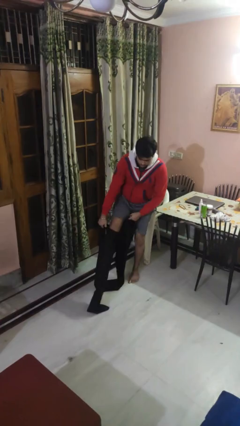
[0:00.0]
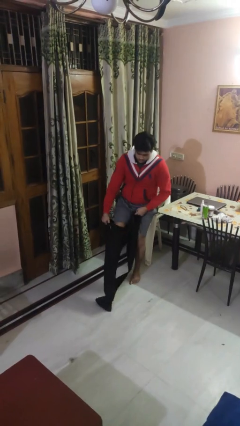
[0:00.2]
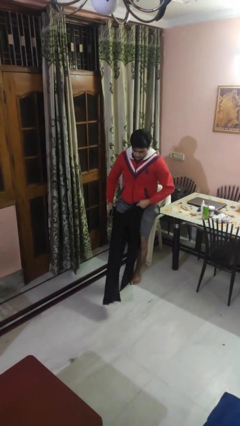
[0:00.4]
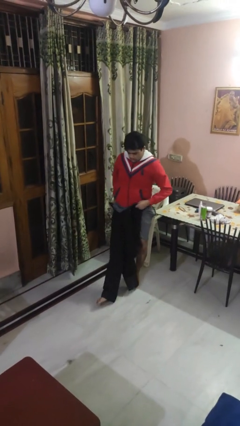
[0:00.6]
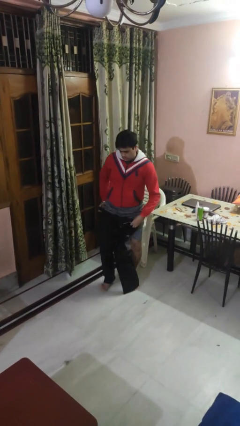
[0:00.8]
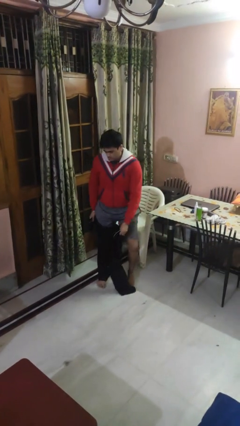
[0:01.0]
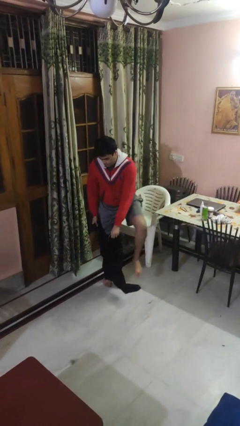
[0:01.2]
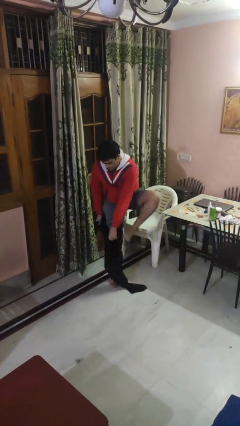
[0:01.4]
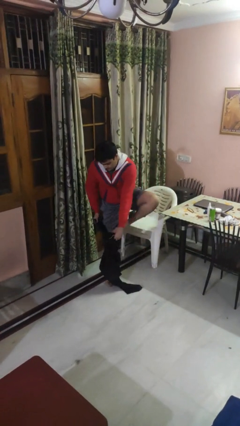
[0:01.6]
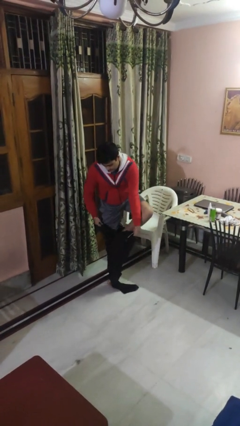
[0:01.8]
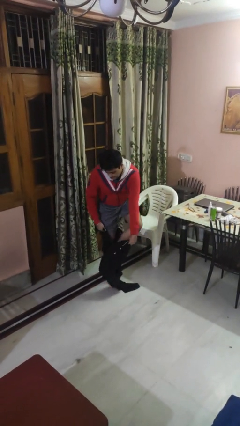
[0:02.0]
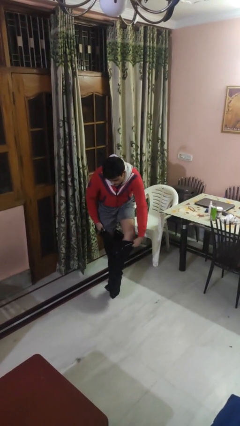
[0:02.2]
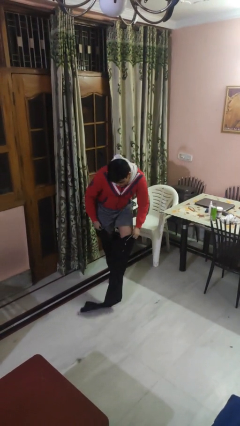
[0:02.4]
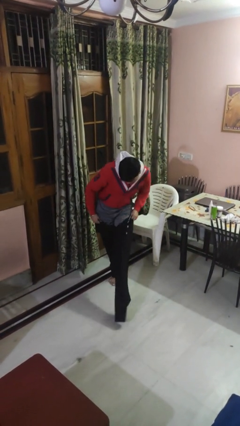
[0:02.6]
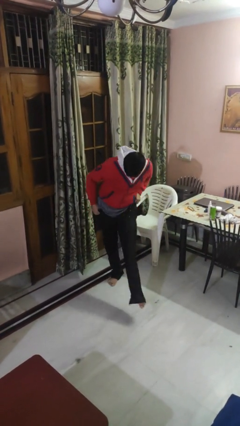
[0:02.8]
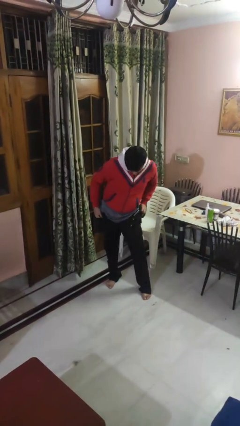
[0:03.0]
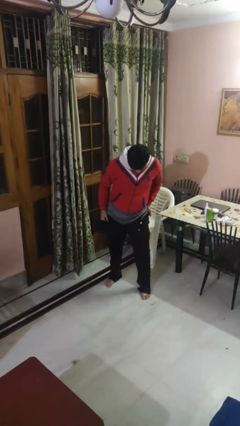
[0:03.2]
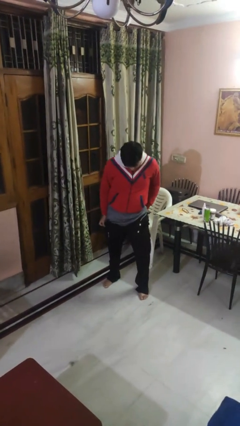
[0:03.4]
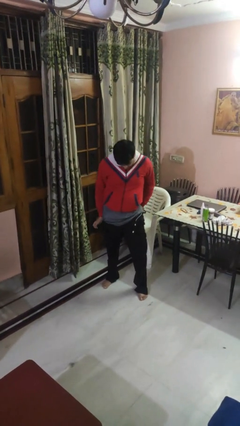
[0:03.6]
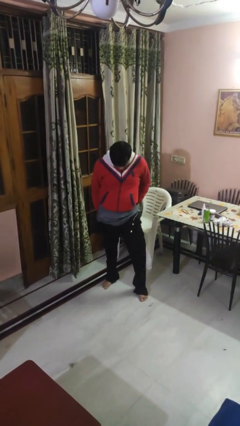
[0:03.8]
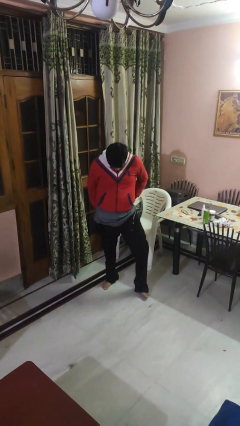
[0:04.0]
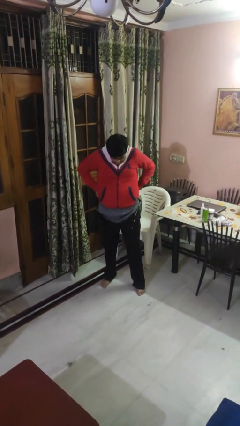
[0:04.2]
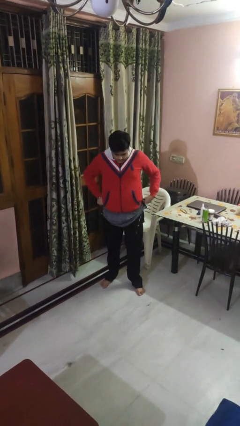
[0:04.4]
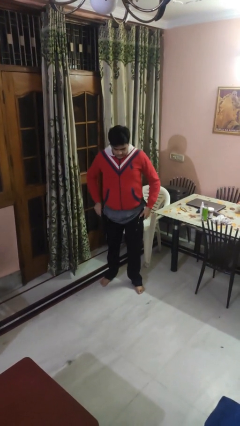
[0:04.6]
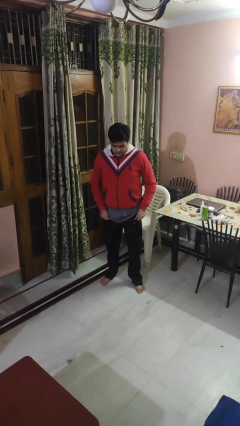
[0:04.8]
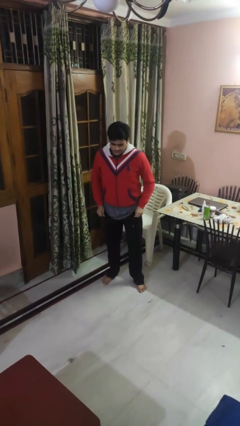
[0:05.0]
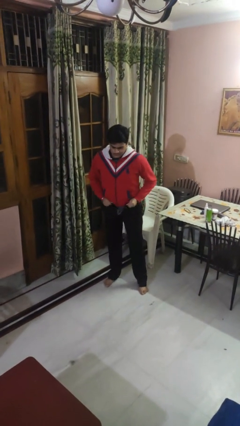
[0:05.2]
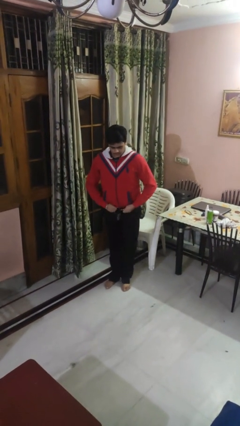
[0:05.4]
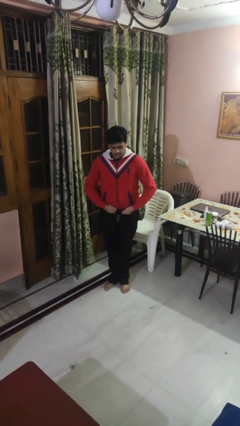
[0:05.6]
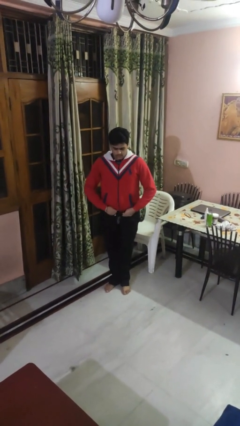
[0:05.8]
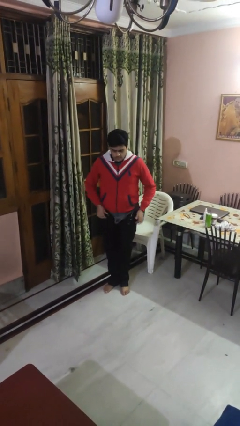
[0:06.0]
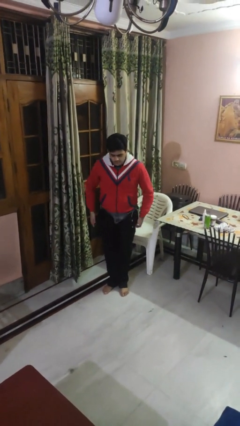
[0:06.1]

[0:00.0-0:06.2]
person puts on pants

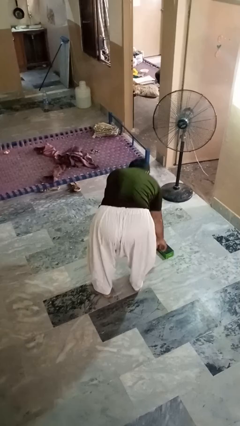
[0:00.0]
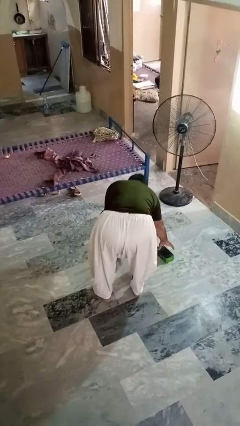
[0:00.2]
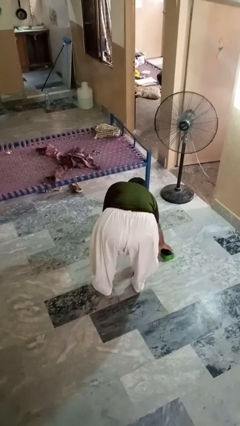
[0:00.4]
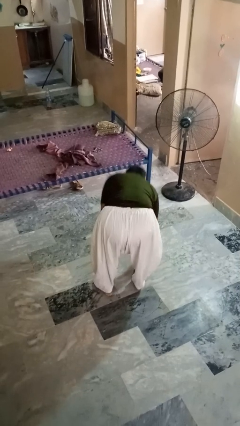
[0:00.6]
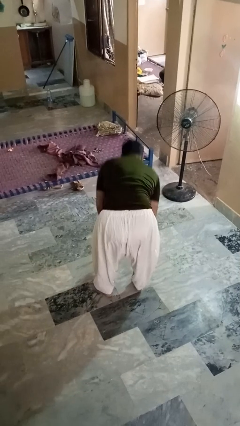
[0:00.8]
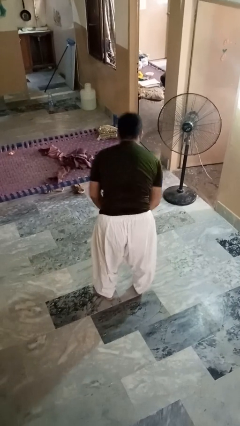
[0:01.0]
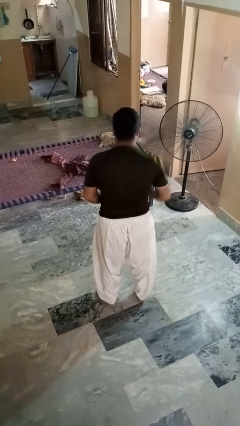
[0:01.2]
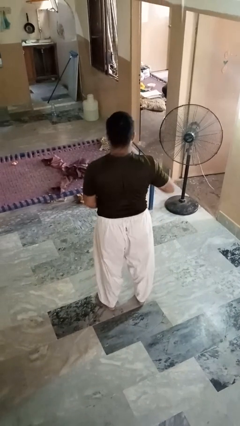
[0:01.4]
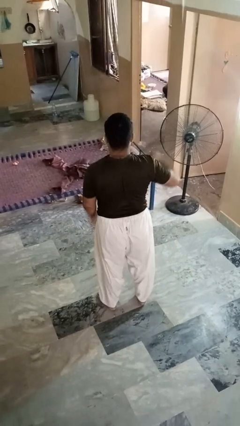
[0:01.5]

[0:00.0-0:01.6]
person picks up object from floor

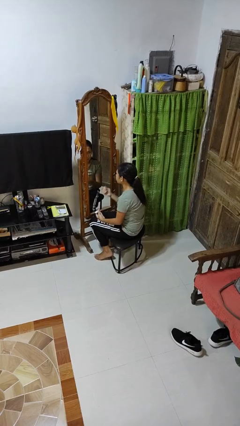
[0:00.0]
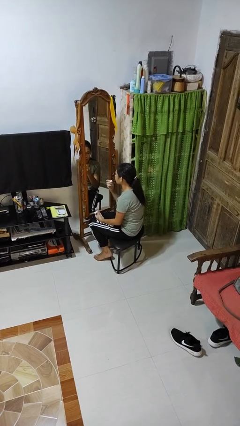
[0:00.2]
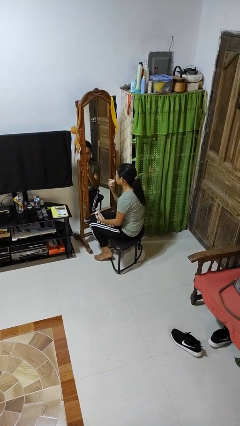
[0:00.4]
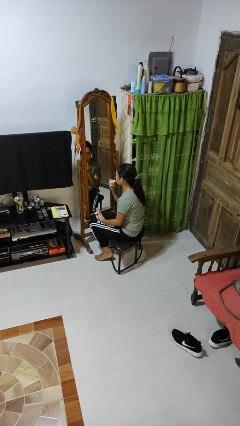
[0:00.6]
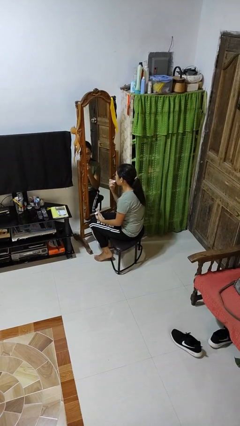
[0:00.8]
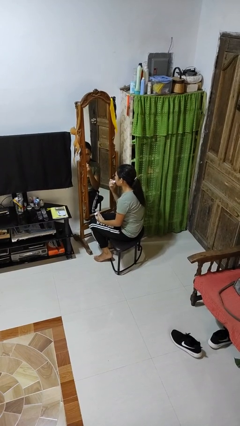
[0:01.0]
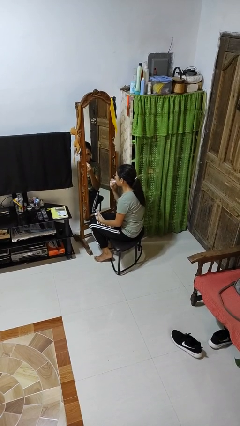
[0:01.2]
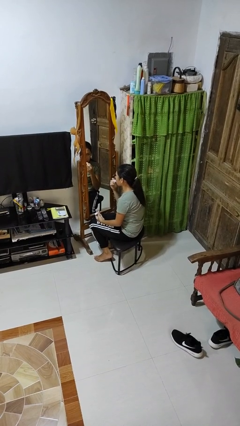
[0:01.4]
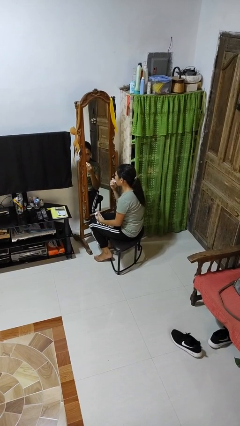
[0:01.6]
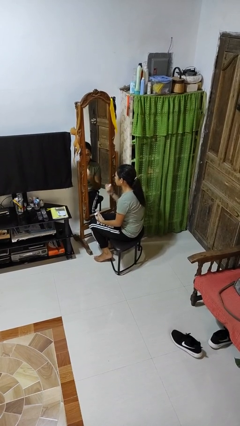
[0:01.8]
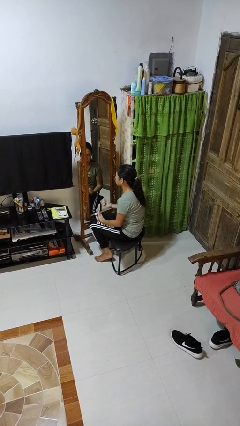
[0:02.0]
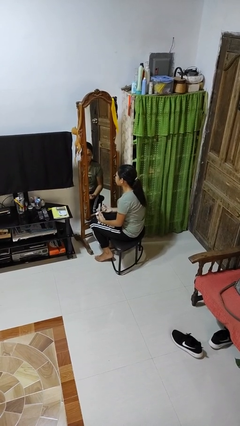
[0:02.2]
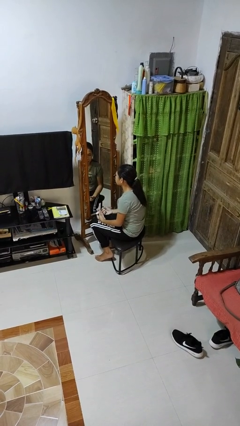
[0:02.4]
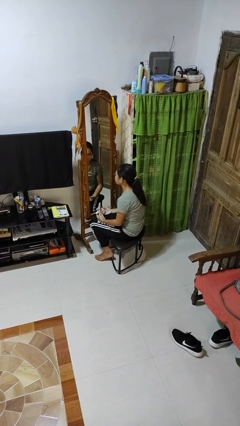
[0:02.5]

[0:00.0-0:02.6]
person applies lip makeup

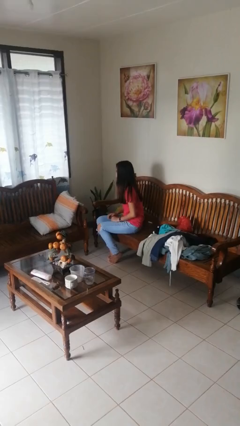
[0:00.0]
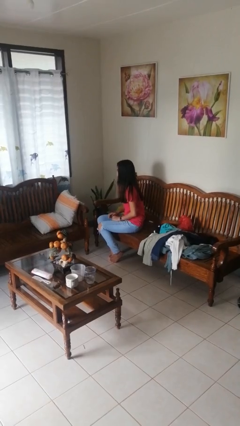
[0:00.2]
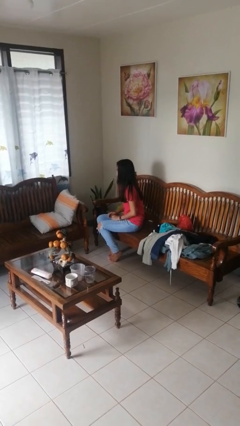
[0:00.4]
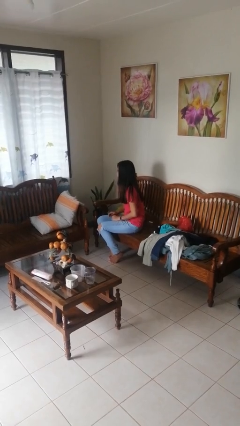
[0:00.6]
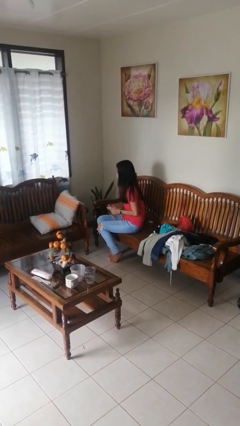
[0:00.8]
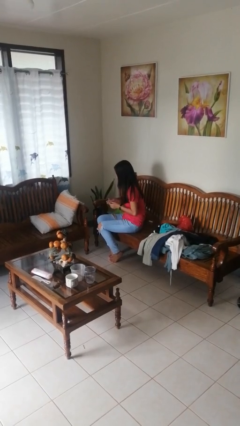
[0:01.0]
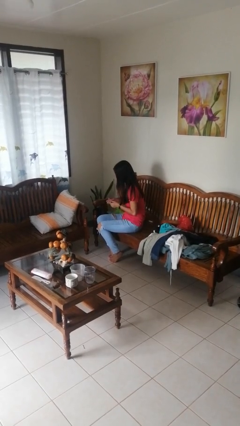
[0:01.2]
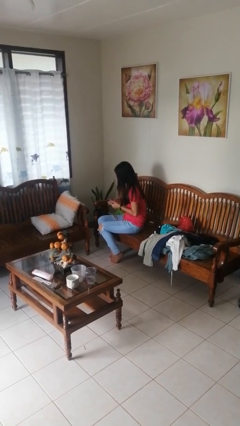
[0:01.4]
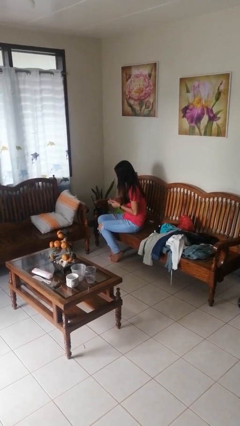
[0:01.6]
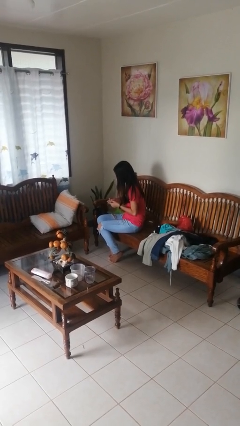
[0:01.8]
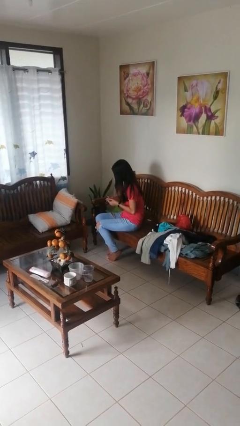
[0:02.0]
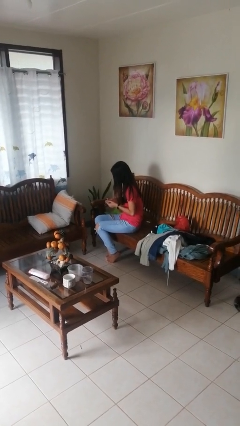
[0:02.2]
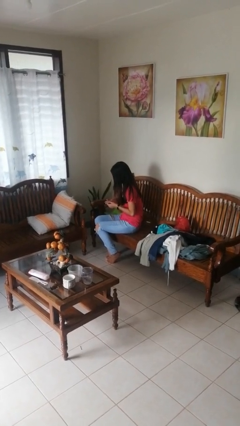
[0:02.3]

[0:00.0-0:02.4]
person clips fingernails

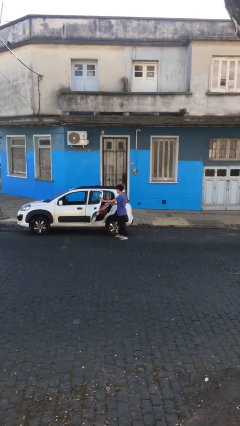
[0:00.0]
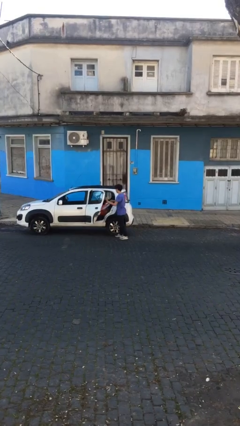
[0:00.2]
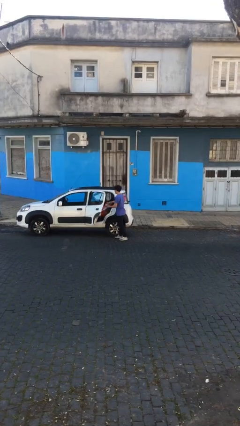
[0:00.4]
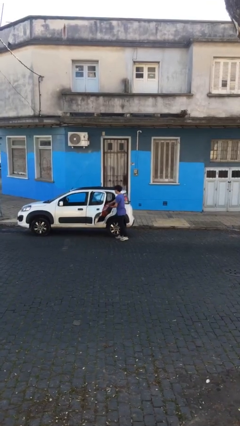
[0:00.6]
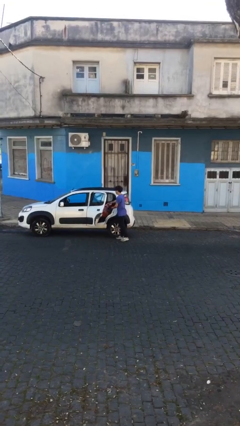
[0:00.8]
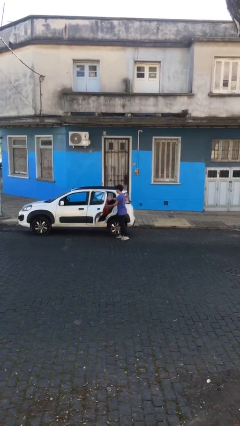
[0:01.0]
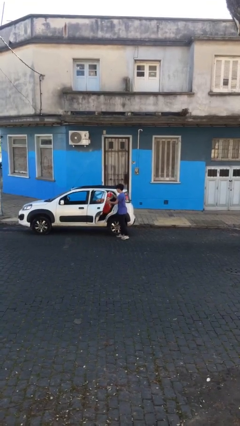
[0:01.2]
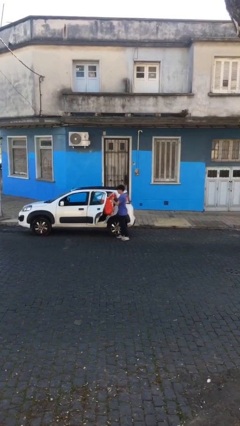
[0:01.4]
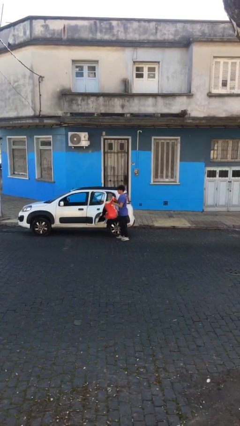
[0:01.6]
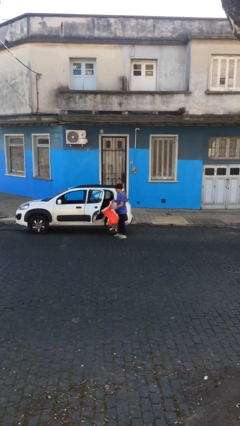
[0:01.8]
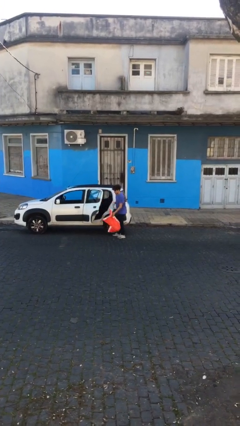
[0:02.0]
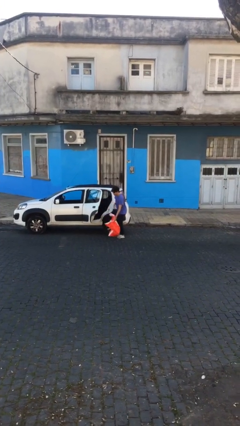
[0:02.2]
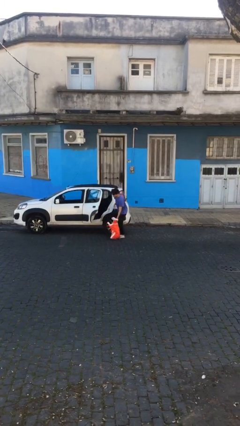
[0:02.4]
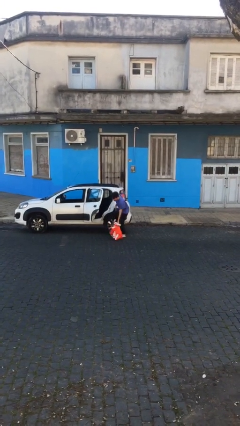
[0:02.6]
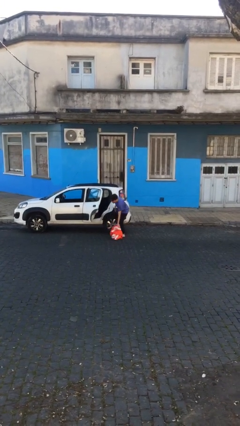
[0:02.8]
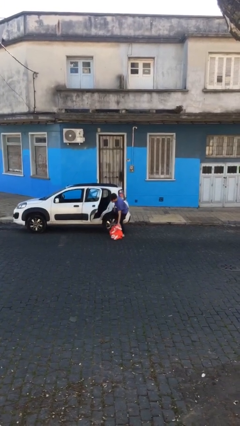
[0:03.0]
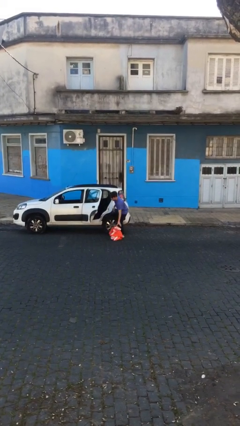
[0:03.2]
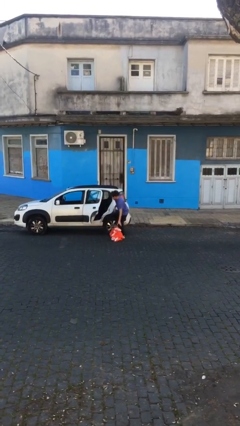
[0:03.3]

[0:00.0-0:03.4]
person unloads car

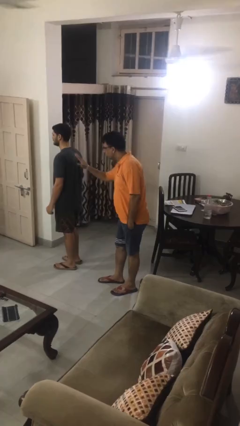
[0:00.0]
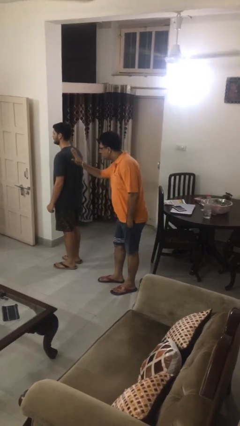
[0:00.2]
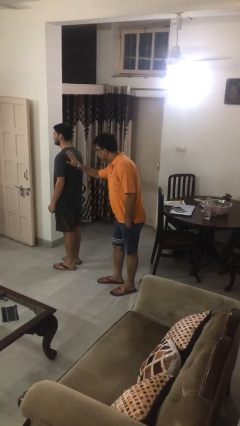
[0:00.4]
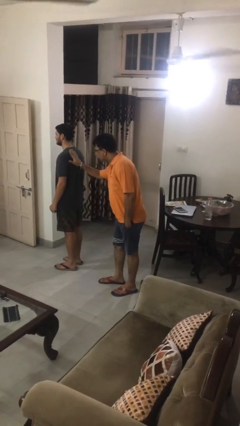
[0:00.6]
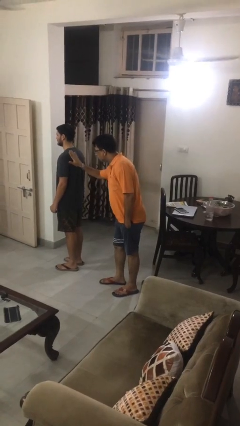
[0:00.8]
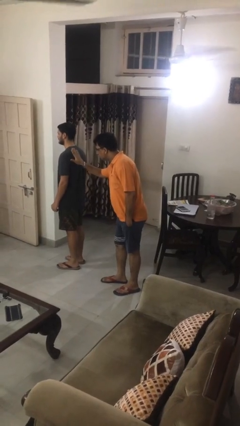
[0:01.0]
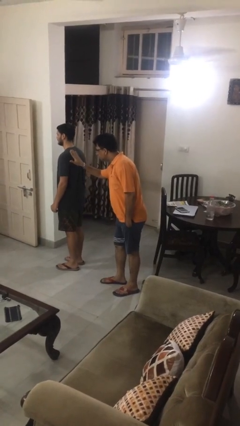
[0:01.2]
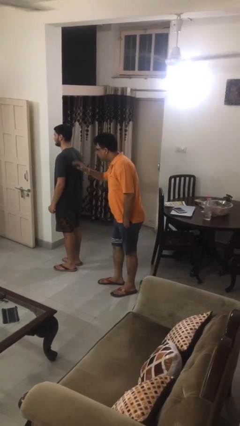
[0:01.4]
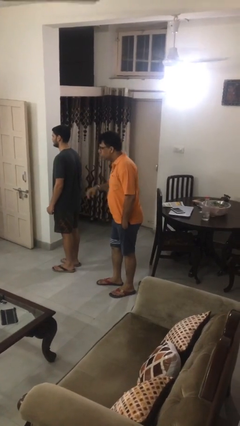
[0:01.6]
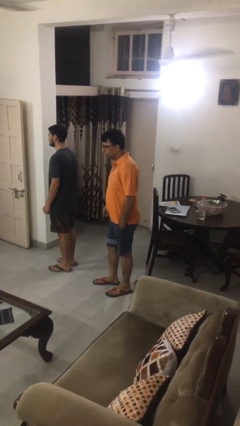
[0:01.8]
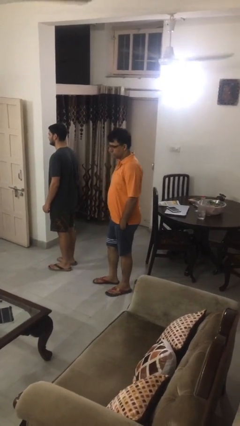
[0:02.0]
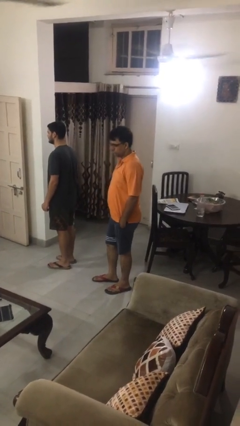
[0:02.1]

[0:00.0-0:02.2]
person touches back of person
